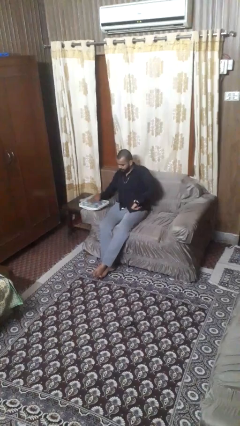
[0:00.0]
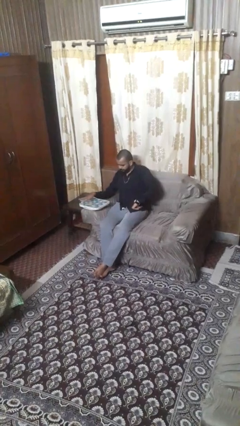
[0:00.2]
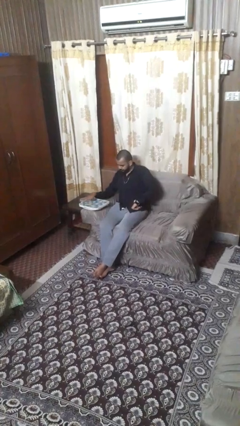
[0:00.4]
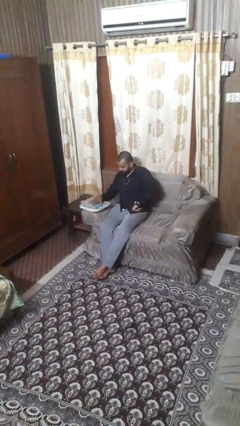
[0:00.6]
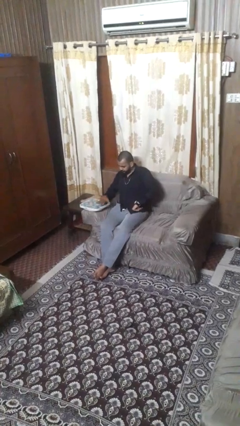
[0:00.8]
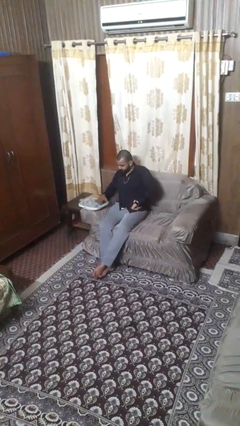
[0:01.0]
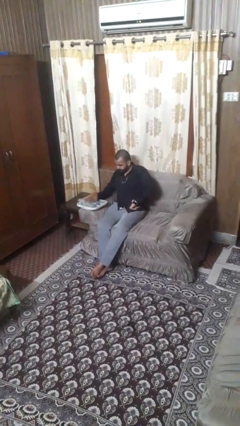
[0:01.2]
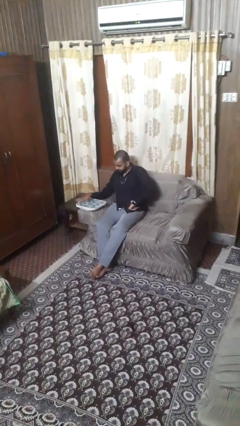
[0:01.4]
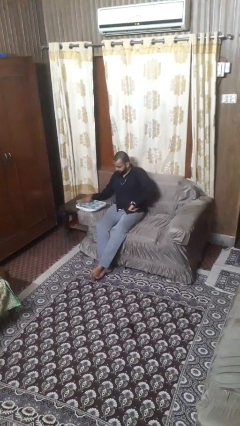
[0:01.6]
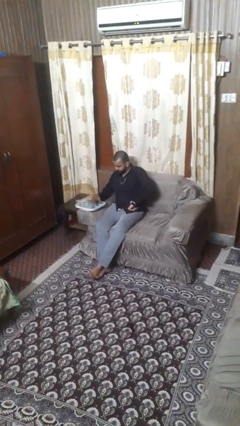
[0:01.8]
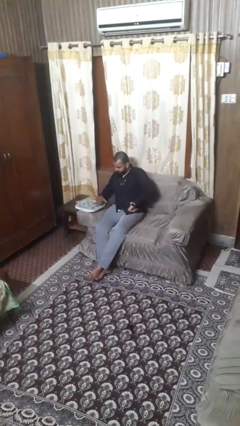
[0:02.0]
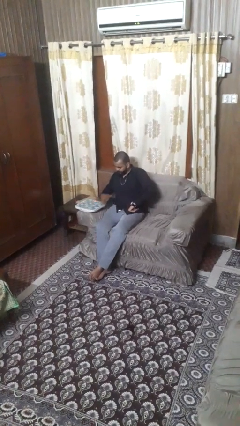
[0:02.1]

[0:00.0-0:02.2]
person waves hand over object

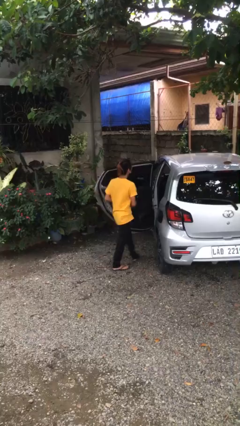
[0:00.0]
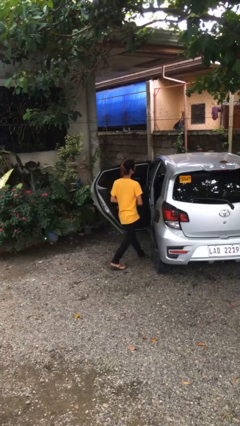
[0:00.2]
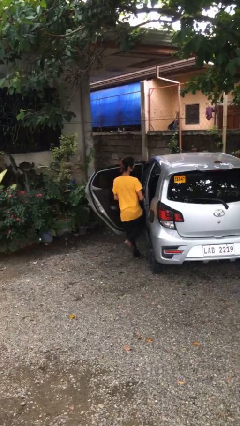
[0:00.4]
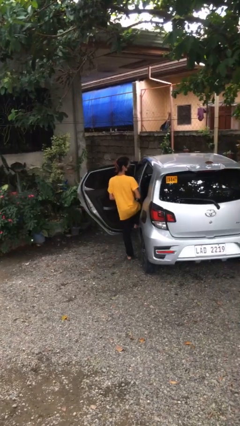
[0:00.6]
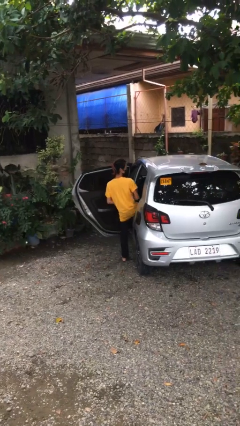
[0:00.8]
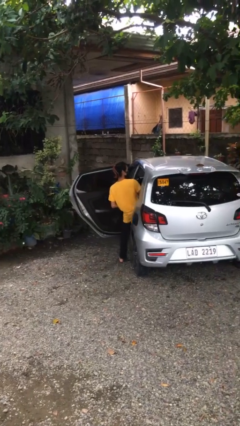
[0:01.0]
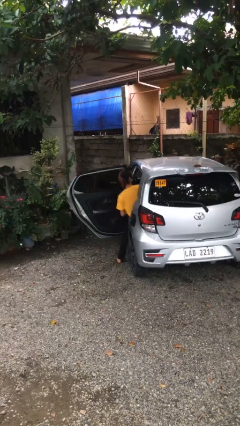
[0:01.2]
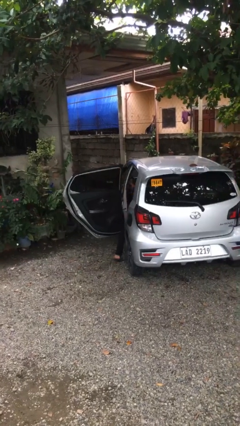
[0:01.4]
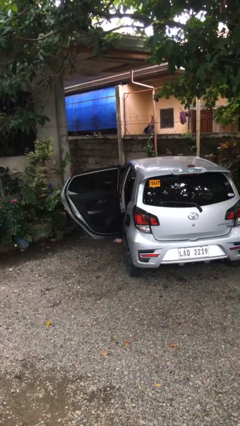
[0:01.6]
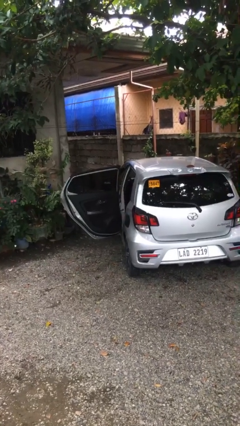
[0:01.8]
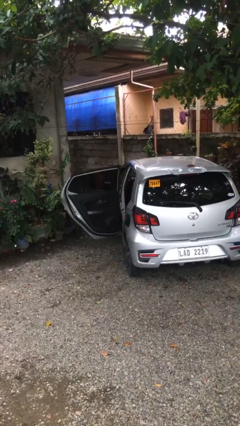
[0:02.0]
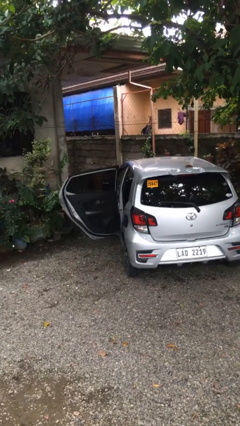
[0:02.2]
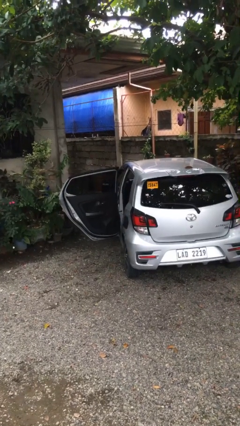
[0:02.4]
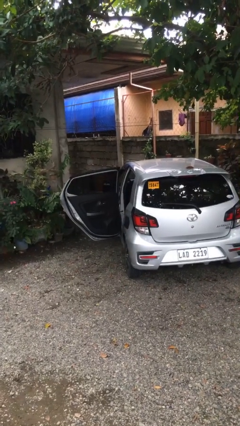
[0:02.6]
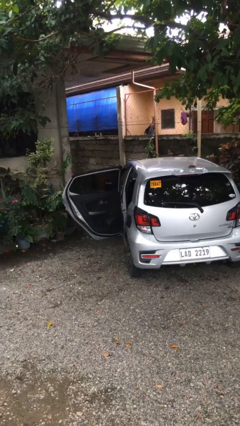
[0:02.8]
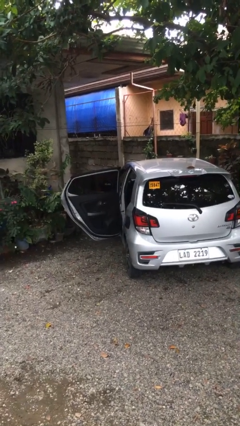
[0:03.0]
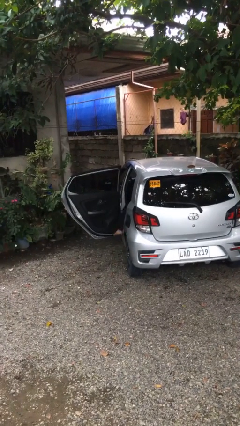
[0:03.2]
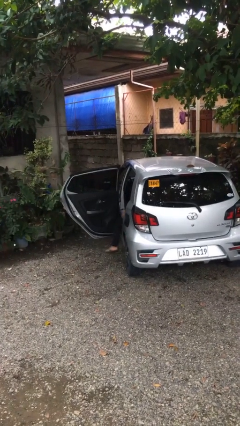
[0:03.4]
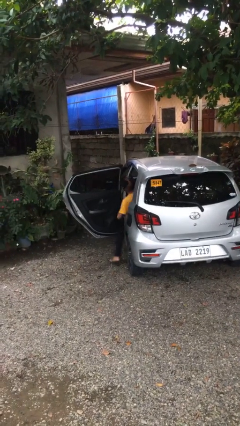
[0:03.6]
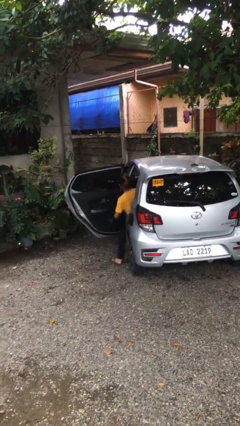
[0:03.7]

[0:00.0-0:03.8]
person enters car

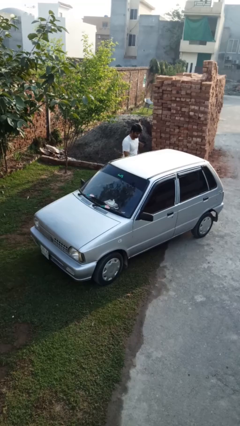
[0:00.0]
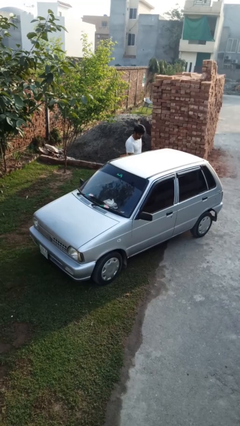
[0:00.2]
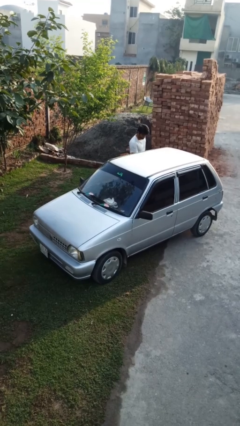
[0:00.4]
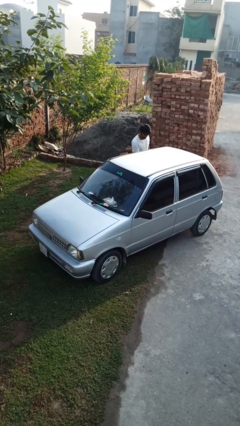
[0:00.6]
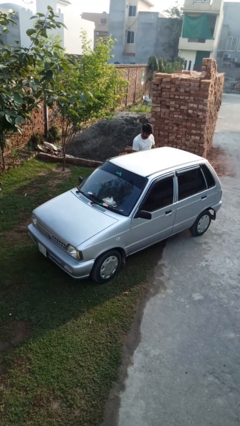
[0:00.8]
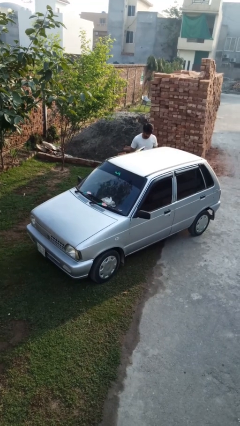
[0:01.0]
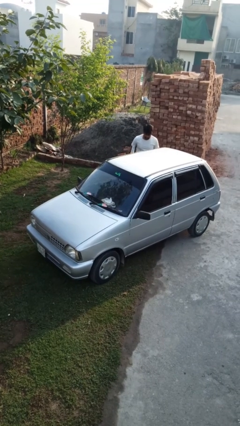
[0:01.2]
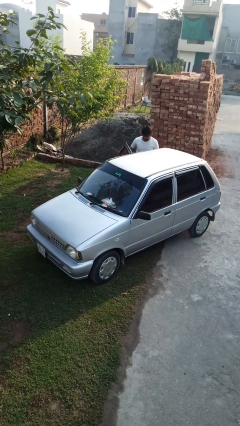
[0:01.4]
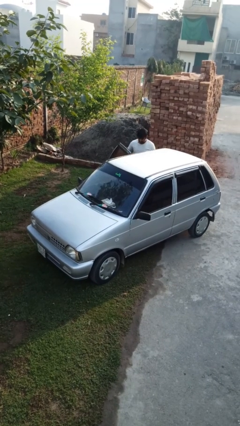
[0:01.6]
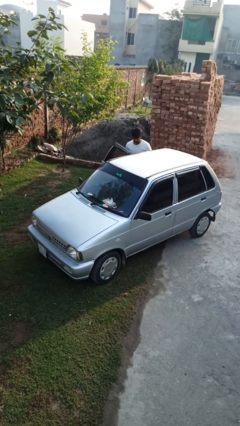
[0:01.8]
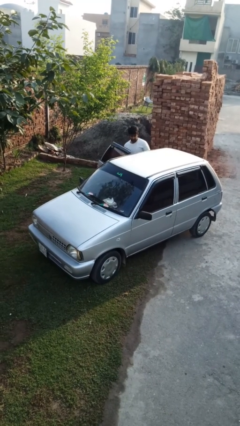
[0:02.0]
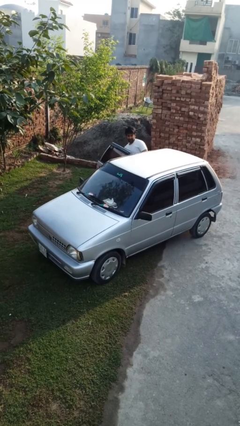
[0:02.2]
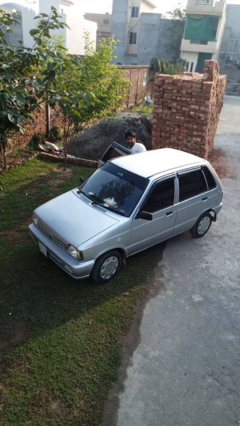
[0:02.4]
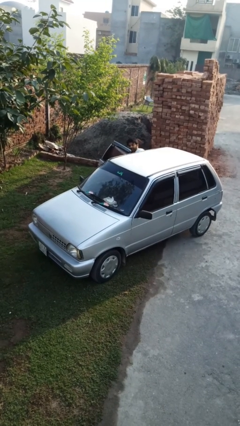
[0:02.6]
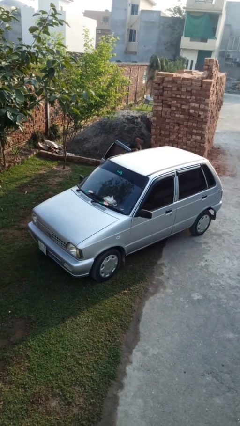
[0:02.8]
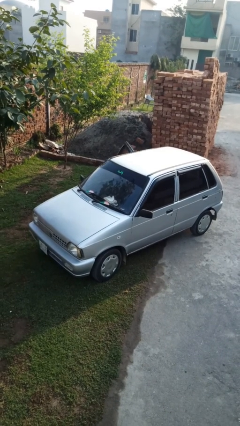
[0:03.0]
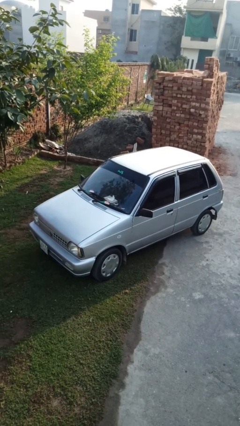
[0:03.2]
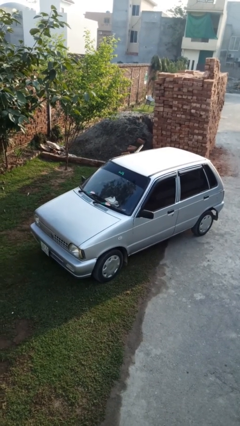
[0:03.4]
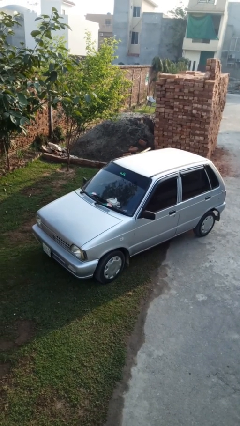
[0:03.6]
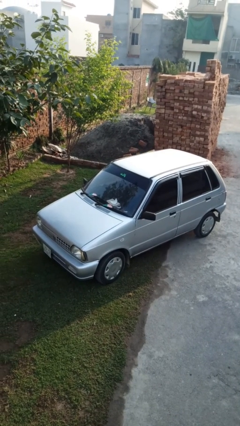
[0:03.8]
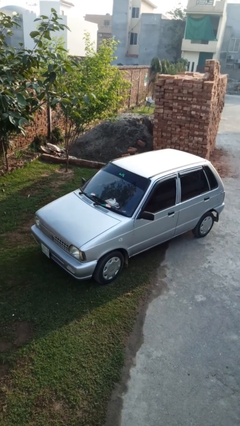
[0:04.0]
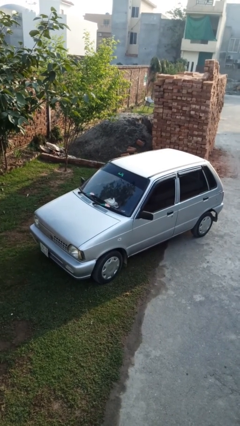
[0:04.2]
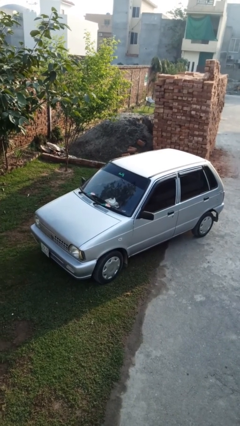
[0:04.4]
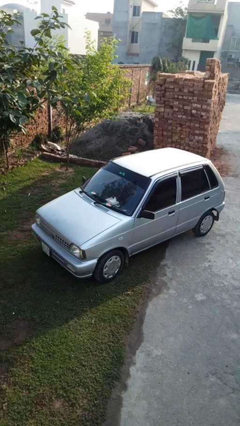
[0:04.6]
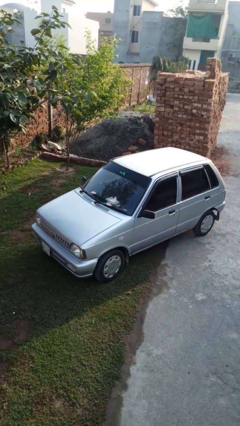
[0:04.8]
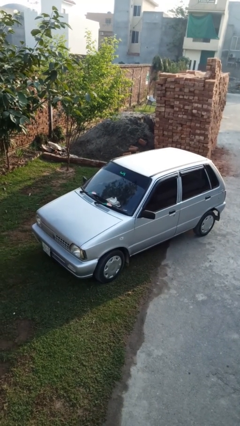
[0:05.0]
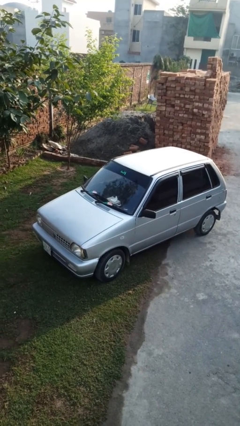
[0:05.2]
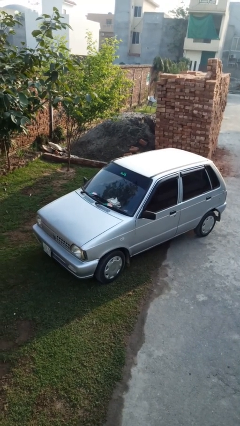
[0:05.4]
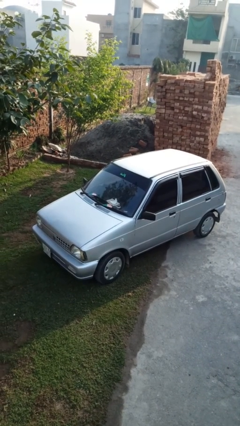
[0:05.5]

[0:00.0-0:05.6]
car picks up person

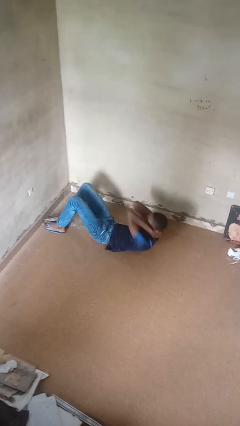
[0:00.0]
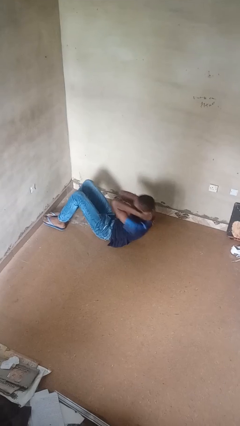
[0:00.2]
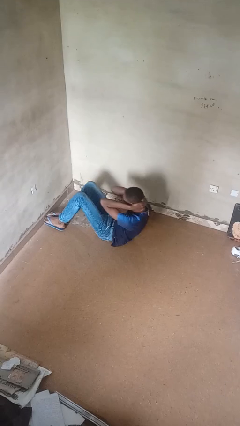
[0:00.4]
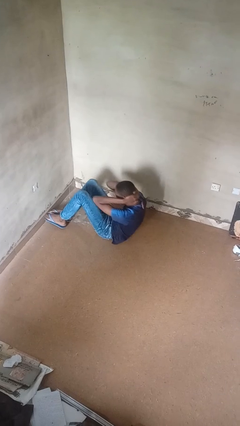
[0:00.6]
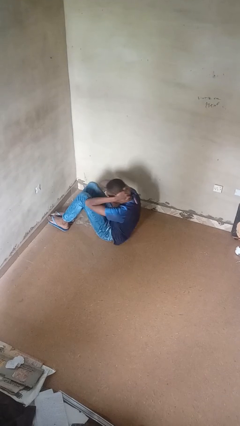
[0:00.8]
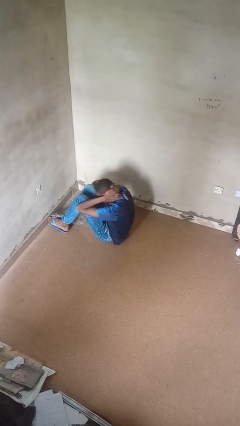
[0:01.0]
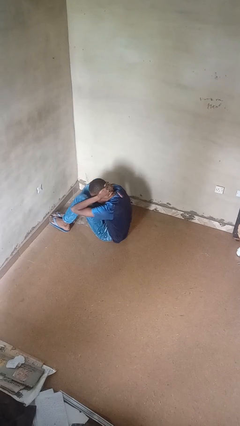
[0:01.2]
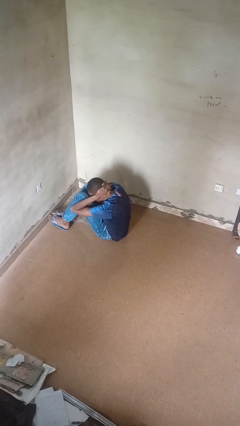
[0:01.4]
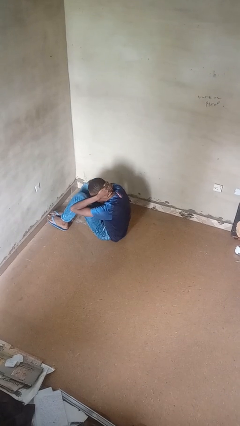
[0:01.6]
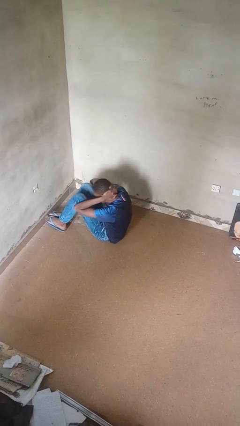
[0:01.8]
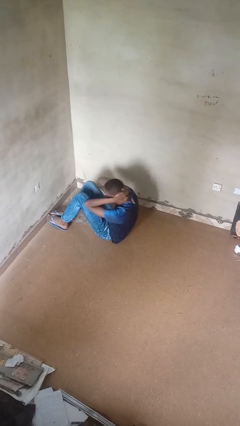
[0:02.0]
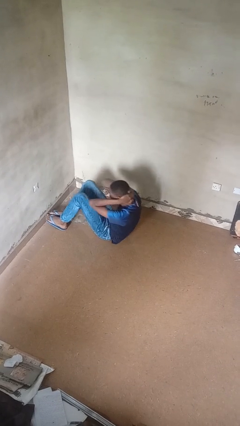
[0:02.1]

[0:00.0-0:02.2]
person exercises with situp

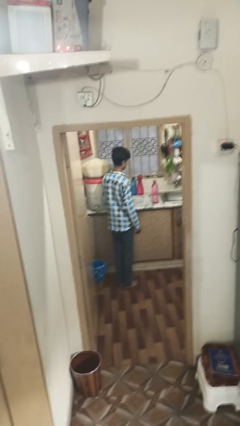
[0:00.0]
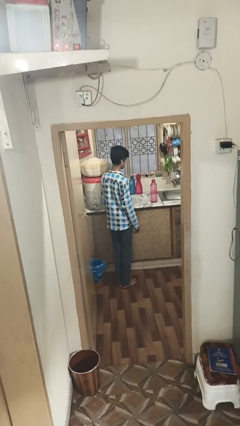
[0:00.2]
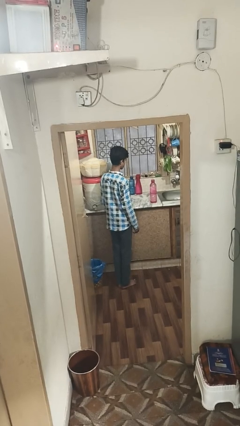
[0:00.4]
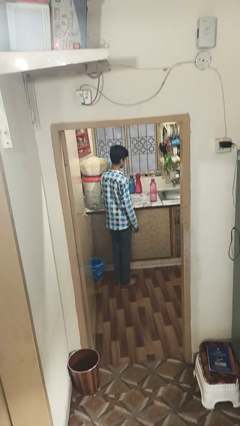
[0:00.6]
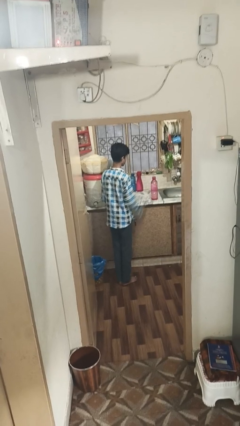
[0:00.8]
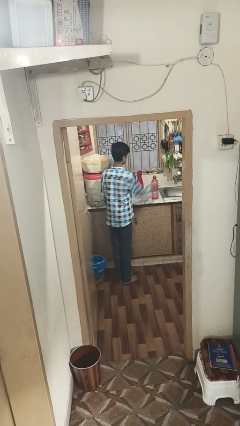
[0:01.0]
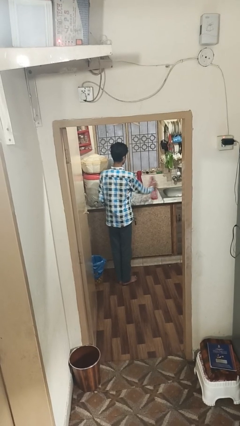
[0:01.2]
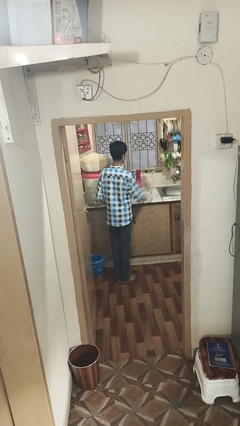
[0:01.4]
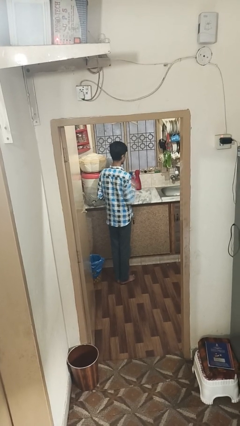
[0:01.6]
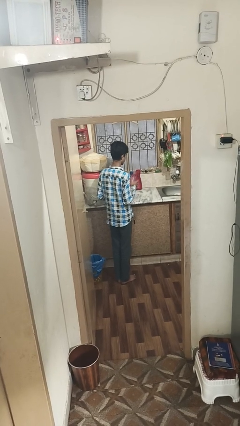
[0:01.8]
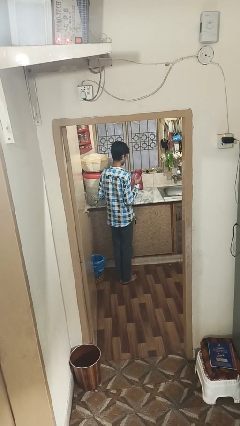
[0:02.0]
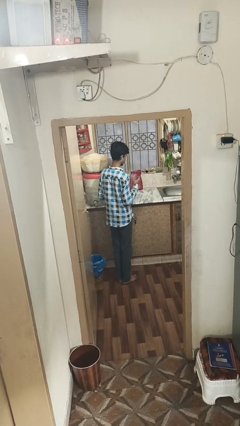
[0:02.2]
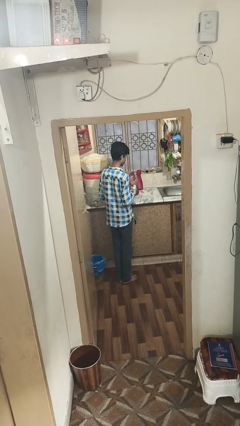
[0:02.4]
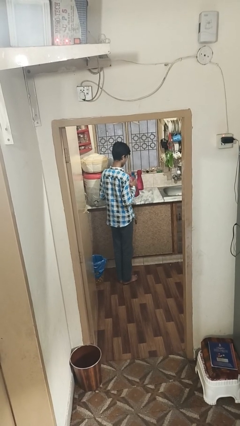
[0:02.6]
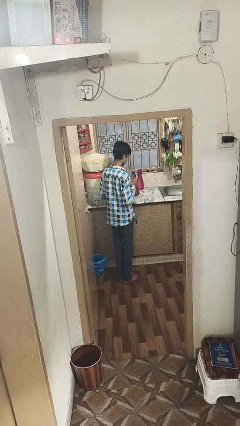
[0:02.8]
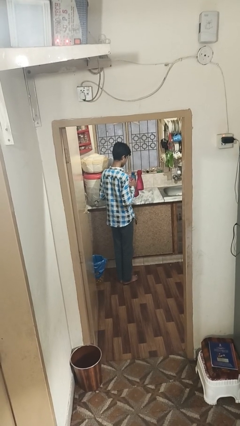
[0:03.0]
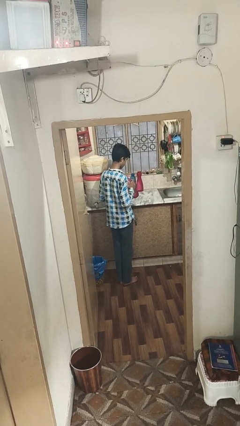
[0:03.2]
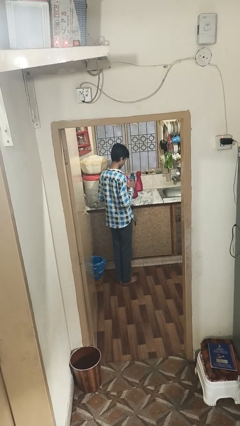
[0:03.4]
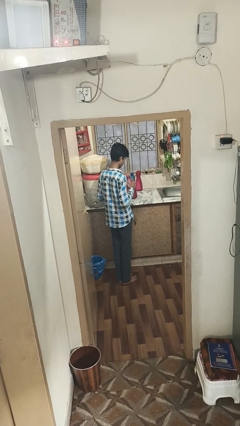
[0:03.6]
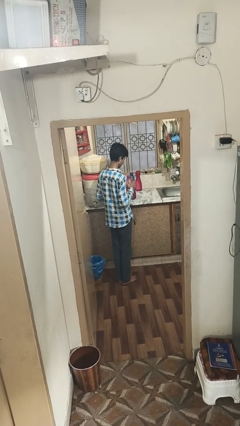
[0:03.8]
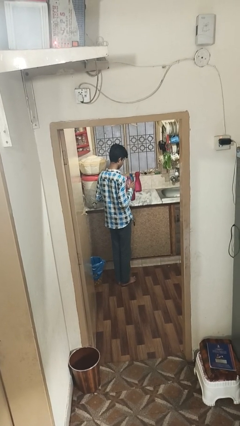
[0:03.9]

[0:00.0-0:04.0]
person picks up object from countertop
